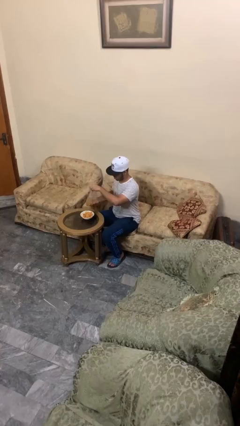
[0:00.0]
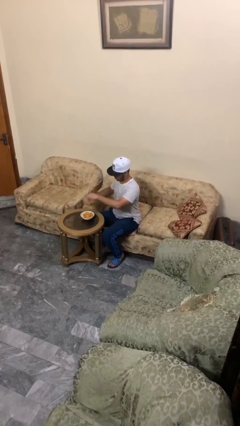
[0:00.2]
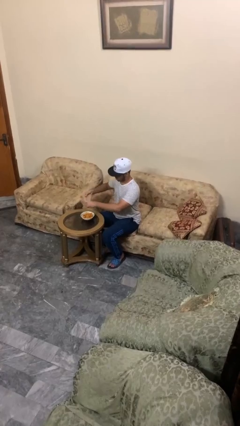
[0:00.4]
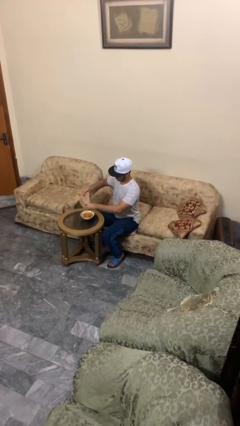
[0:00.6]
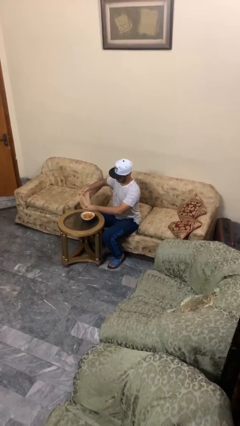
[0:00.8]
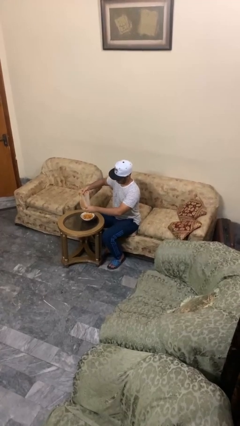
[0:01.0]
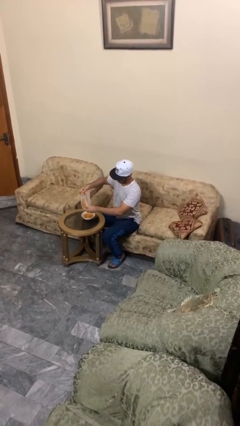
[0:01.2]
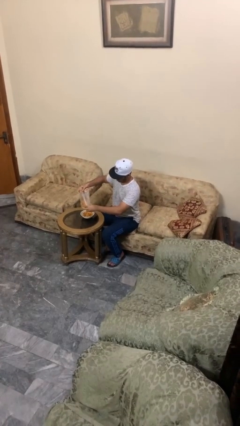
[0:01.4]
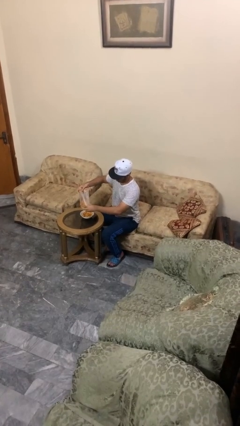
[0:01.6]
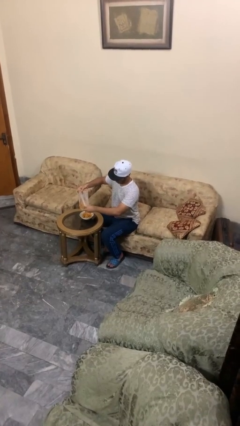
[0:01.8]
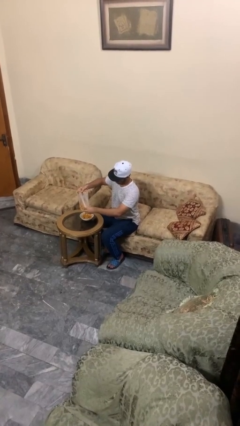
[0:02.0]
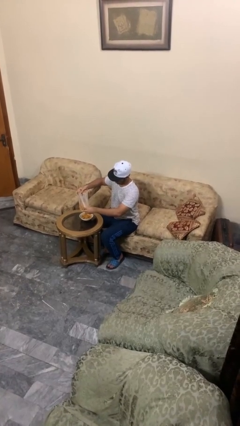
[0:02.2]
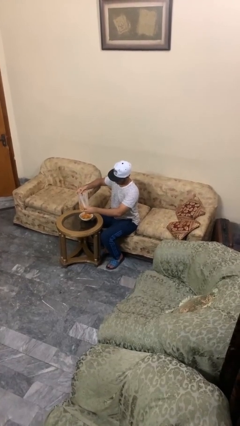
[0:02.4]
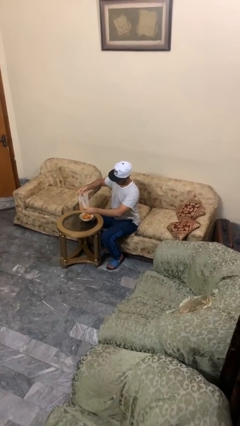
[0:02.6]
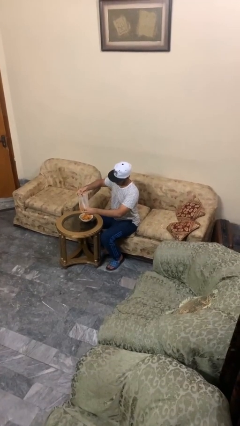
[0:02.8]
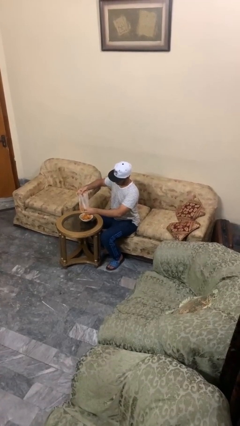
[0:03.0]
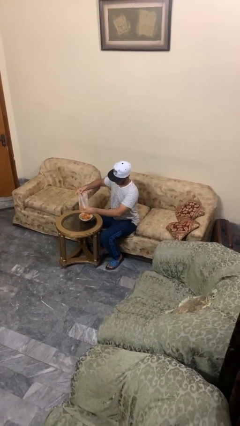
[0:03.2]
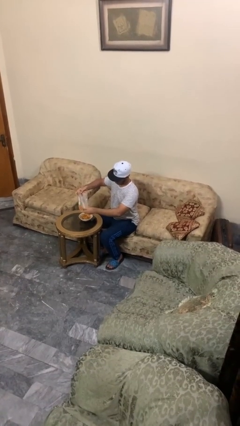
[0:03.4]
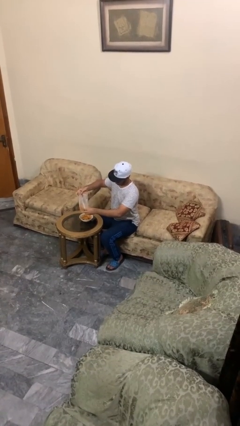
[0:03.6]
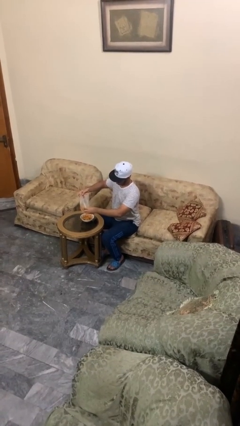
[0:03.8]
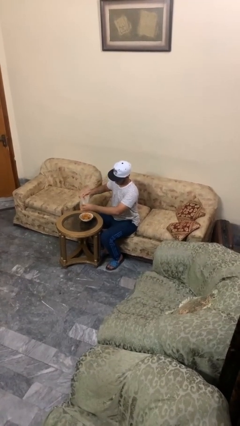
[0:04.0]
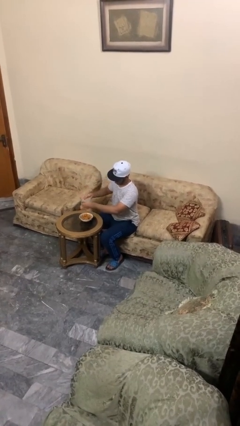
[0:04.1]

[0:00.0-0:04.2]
person pours into bowl

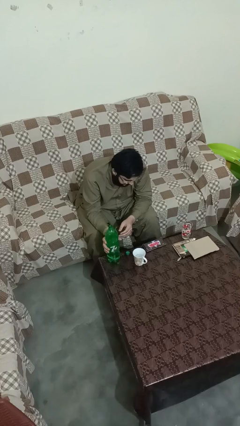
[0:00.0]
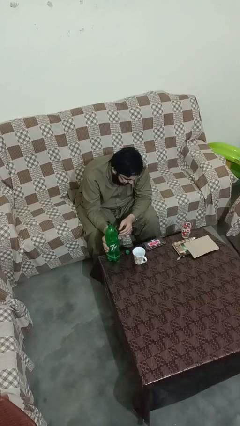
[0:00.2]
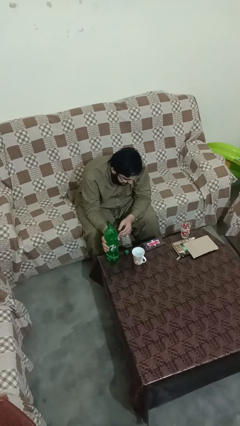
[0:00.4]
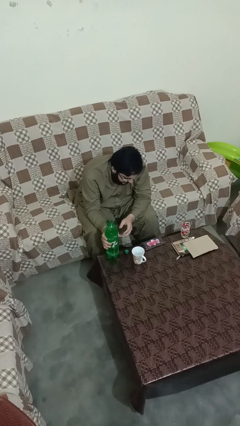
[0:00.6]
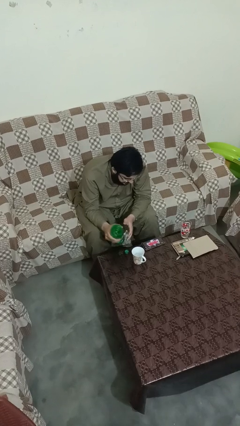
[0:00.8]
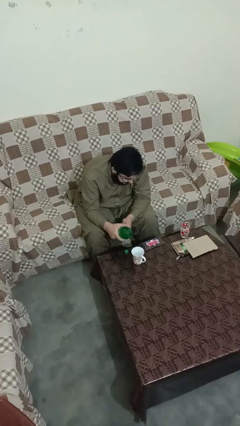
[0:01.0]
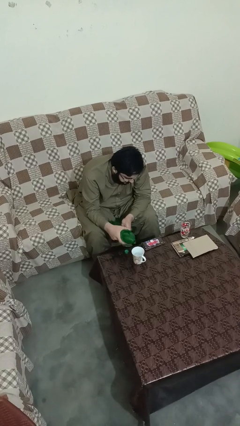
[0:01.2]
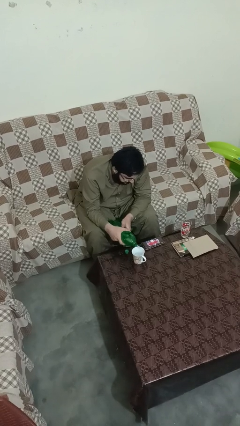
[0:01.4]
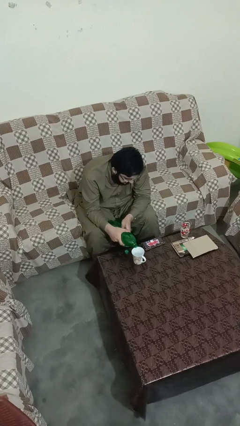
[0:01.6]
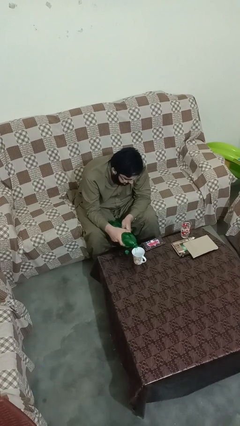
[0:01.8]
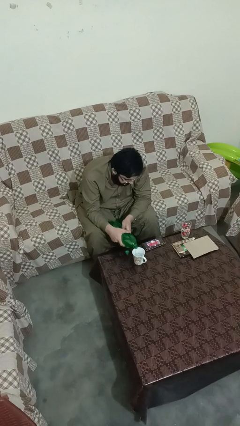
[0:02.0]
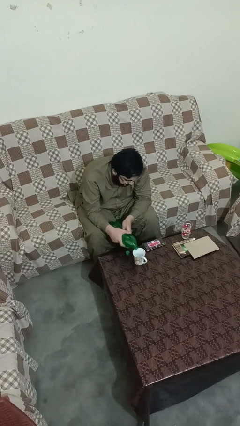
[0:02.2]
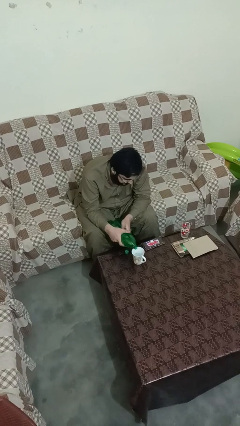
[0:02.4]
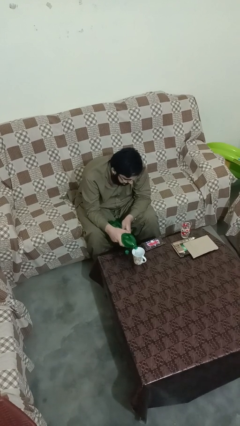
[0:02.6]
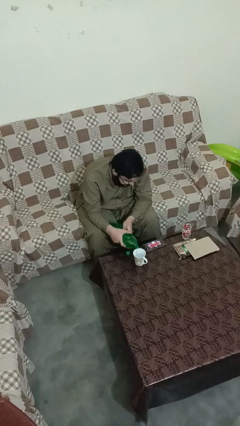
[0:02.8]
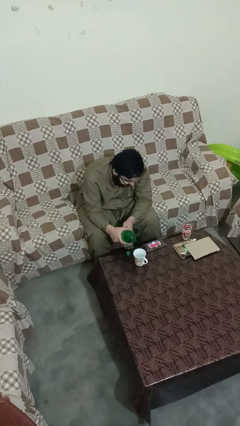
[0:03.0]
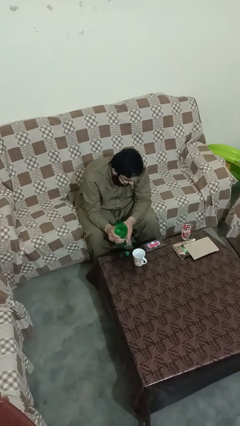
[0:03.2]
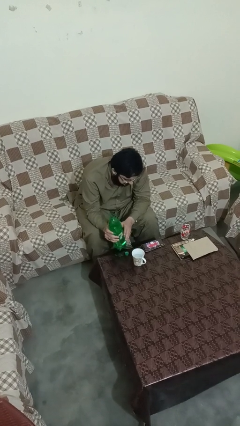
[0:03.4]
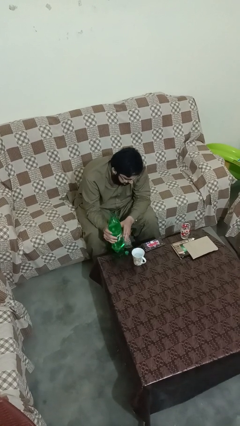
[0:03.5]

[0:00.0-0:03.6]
person pours liquid into cup

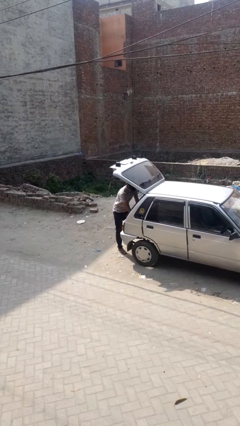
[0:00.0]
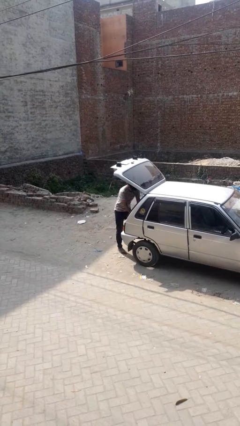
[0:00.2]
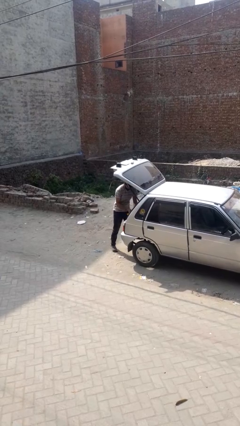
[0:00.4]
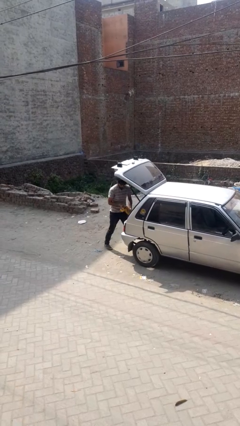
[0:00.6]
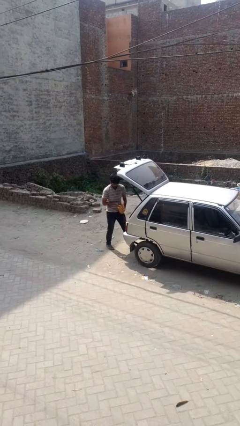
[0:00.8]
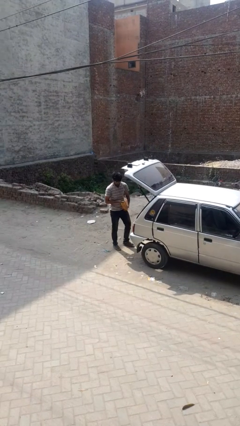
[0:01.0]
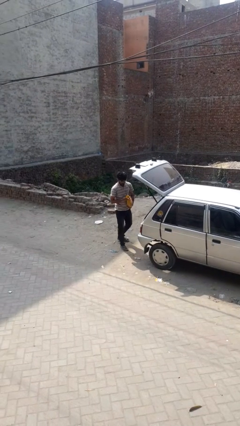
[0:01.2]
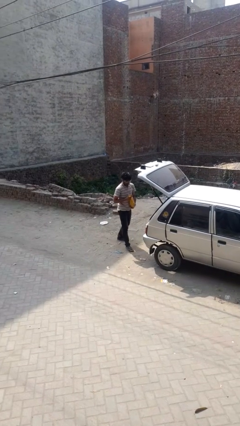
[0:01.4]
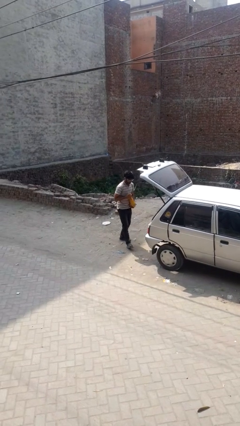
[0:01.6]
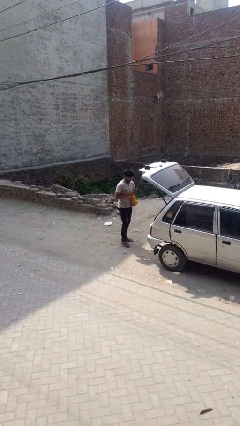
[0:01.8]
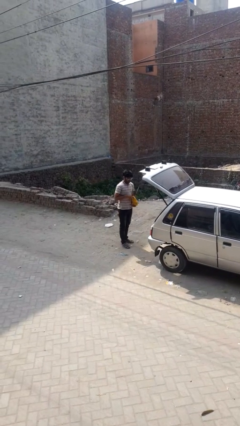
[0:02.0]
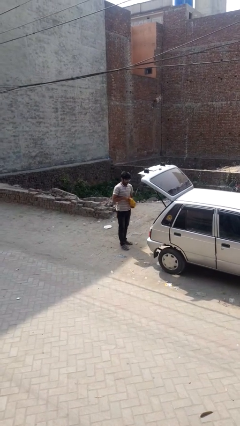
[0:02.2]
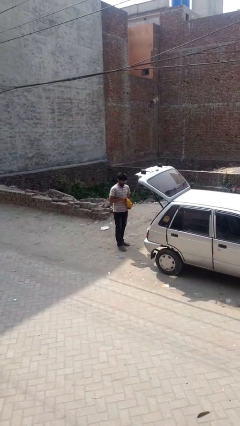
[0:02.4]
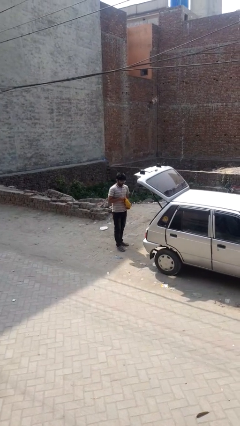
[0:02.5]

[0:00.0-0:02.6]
person unloads car

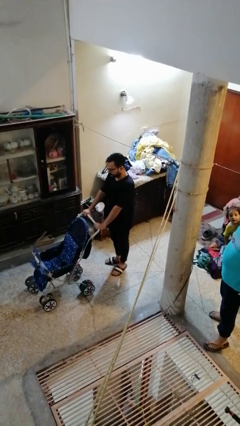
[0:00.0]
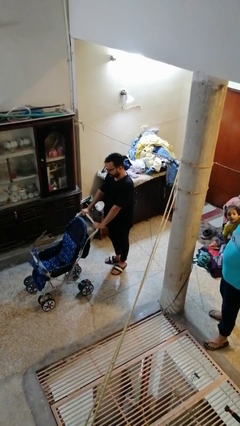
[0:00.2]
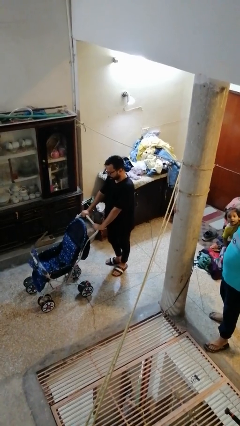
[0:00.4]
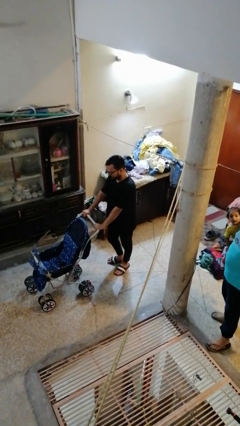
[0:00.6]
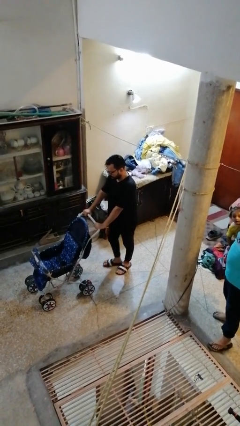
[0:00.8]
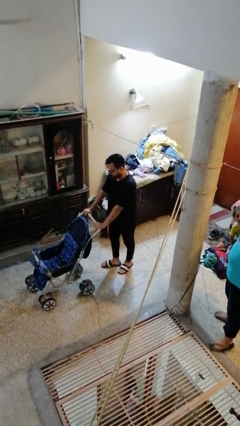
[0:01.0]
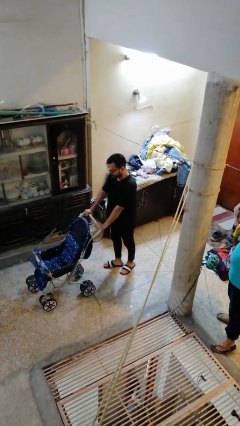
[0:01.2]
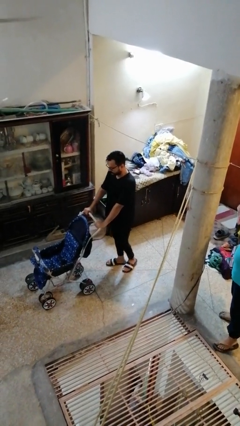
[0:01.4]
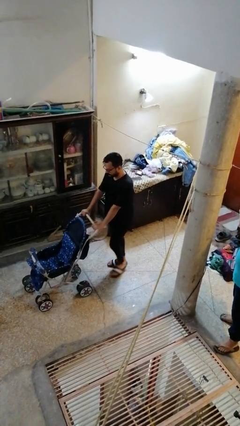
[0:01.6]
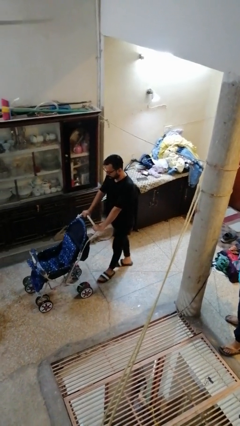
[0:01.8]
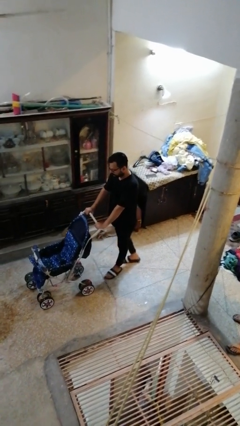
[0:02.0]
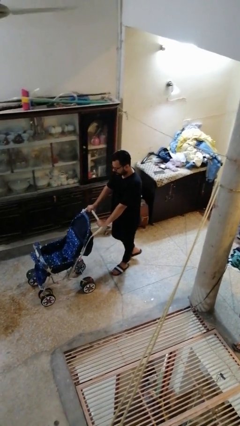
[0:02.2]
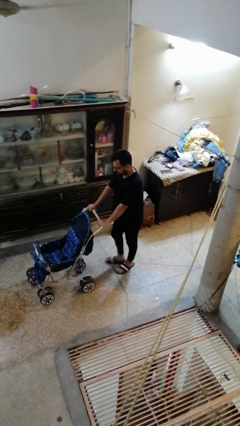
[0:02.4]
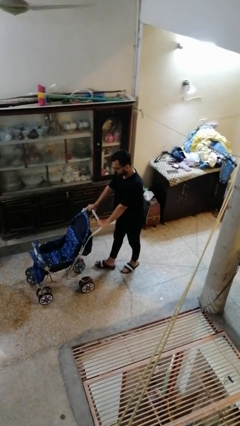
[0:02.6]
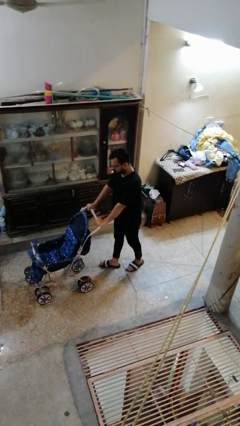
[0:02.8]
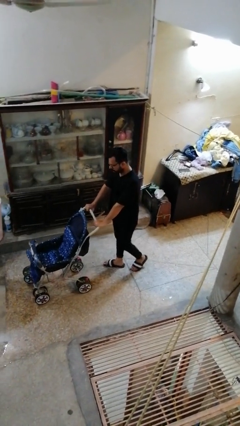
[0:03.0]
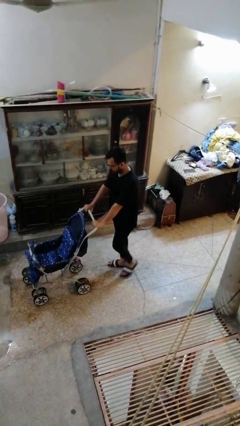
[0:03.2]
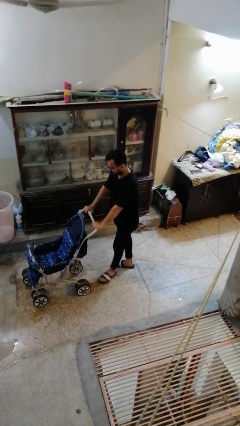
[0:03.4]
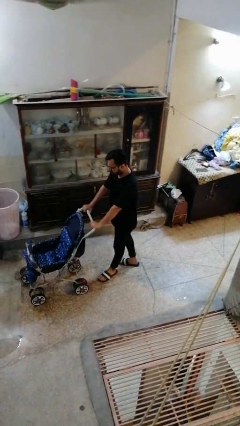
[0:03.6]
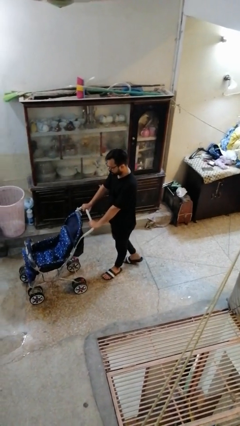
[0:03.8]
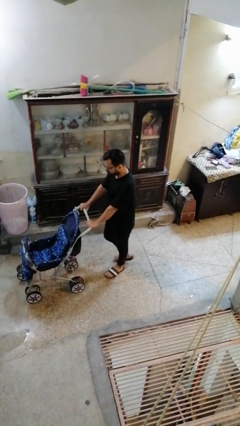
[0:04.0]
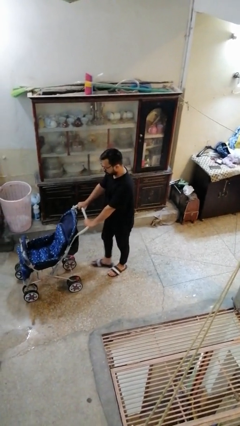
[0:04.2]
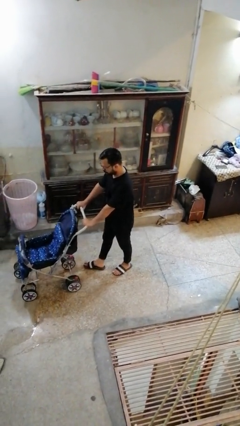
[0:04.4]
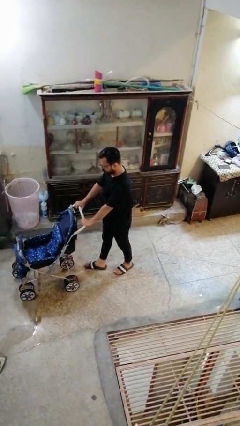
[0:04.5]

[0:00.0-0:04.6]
person pushes wheeled cart

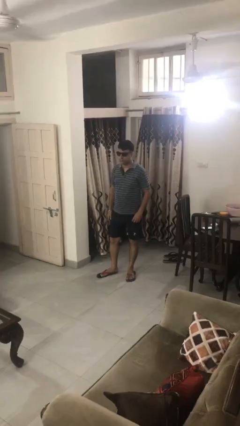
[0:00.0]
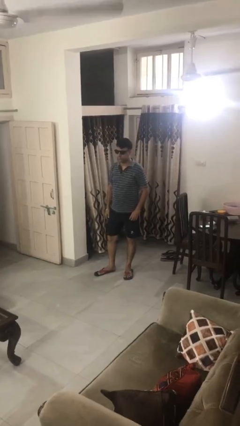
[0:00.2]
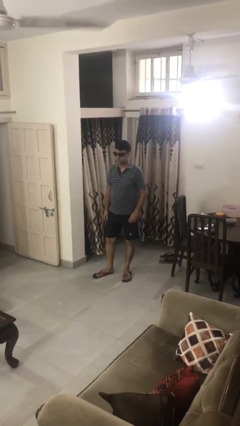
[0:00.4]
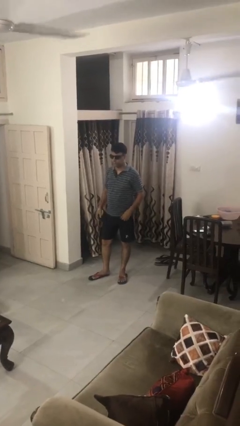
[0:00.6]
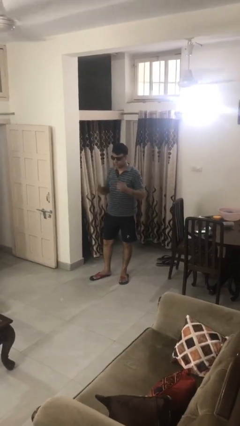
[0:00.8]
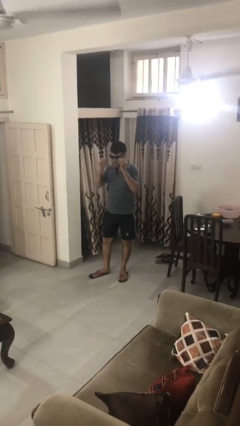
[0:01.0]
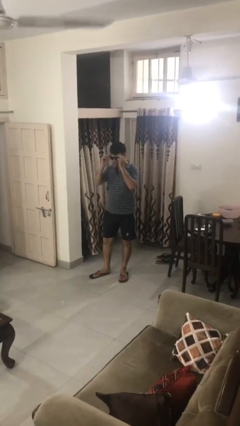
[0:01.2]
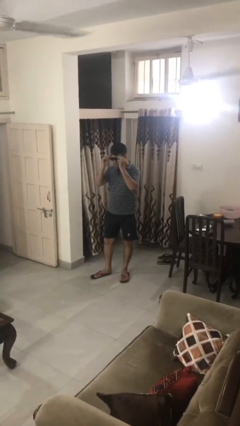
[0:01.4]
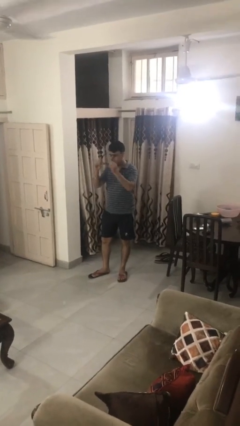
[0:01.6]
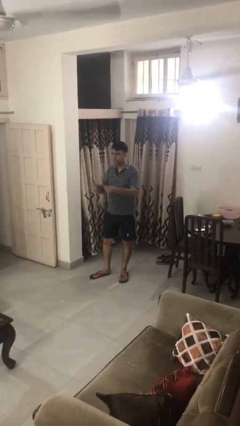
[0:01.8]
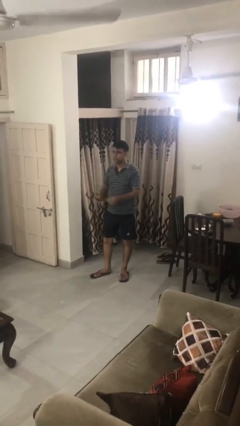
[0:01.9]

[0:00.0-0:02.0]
person takes off sunglasses

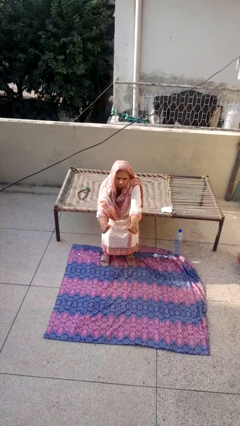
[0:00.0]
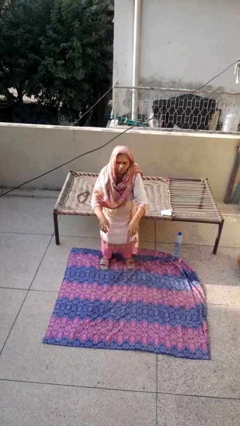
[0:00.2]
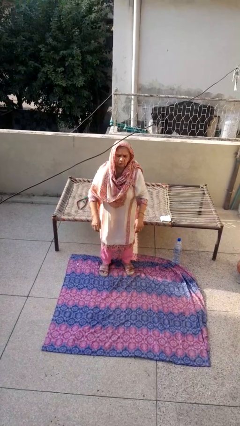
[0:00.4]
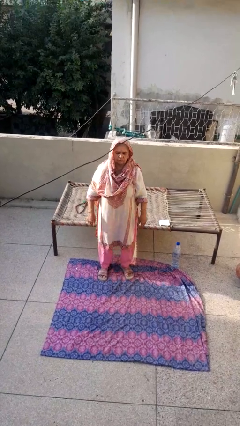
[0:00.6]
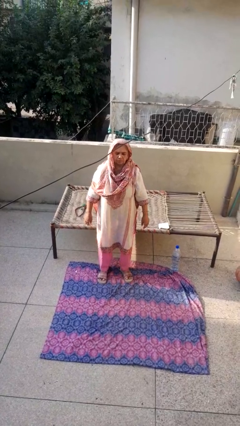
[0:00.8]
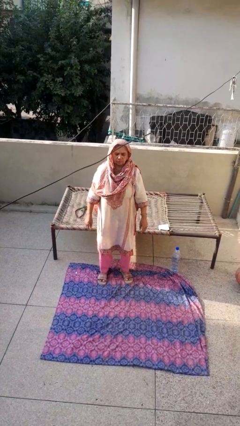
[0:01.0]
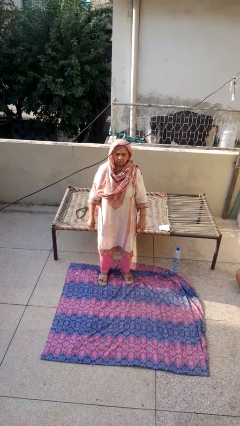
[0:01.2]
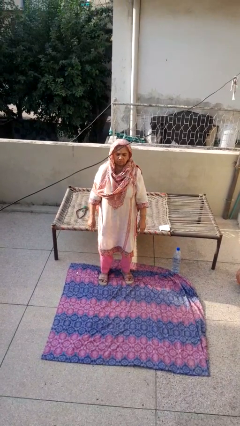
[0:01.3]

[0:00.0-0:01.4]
person stands up
